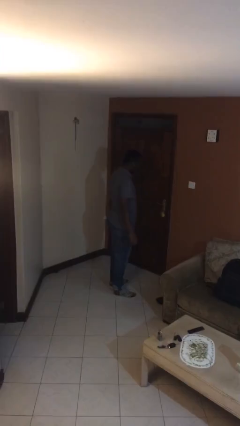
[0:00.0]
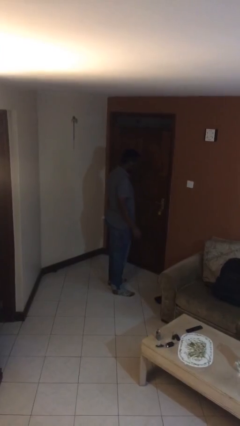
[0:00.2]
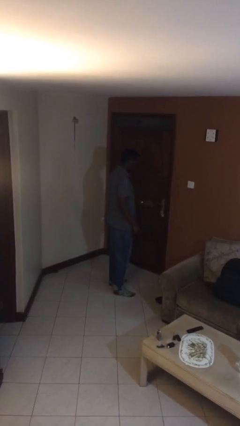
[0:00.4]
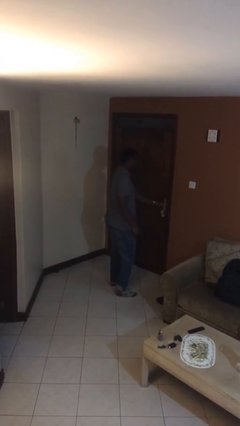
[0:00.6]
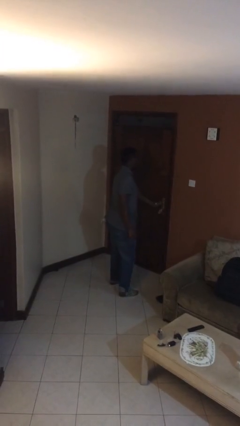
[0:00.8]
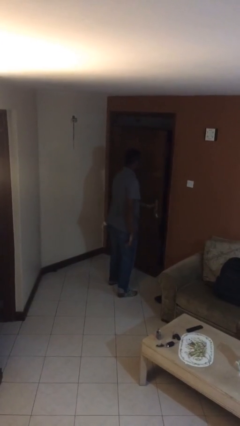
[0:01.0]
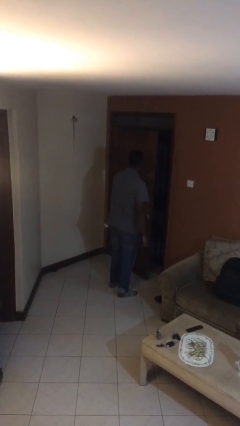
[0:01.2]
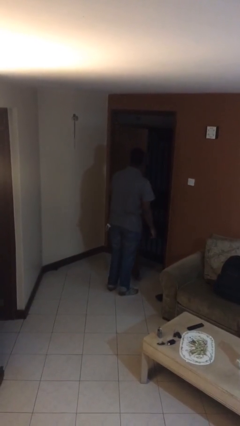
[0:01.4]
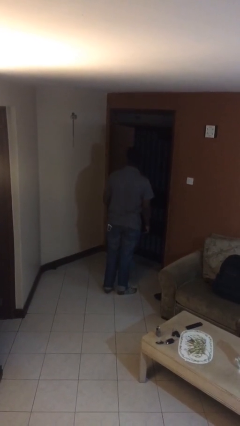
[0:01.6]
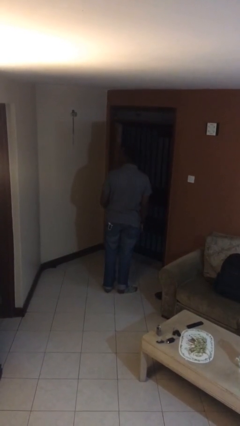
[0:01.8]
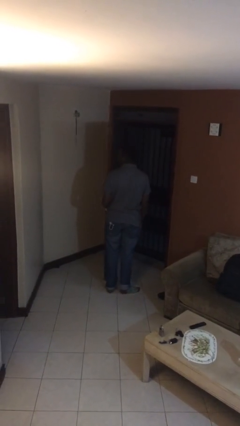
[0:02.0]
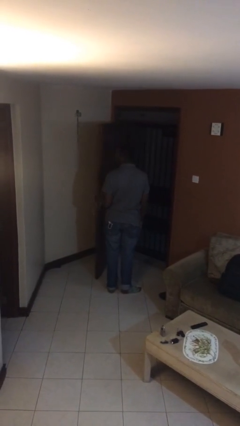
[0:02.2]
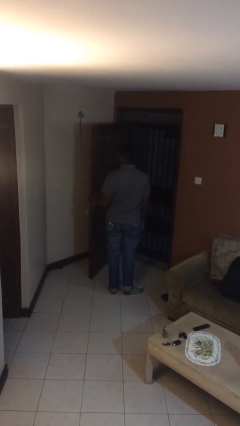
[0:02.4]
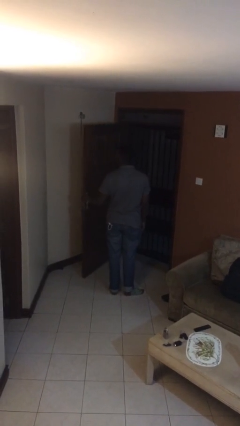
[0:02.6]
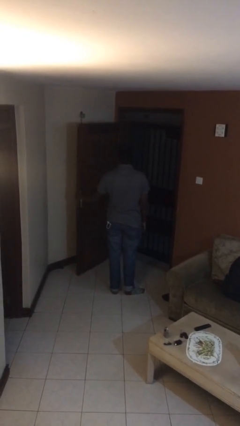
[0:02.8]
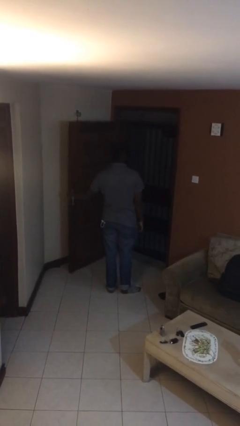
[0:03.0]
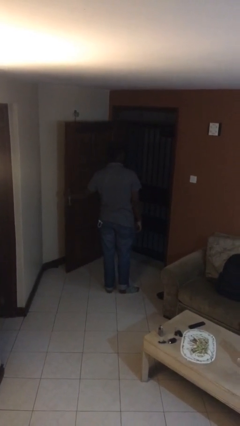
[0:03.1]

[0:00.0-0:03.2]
person opens facility door

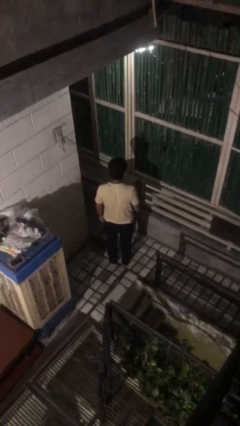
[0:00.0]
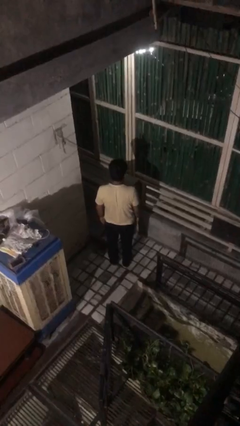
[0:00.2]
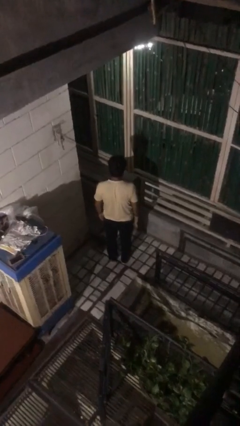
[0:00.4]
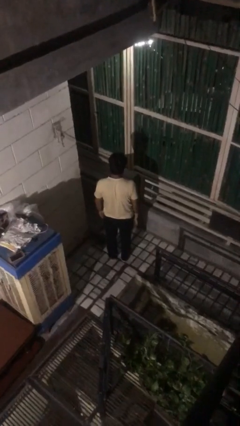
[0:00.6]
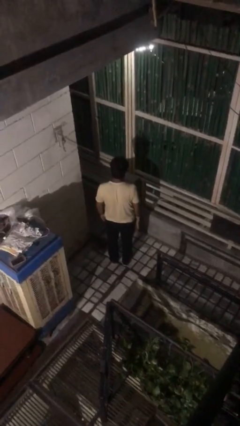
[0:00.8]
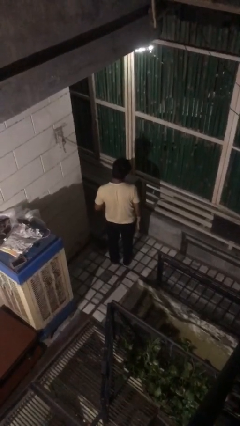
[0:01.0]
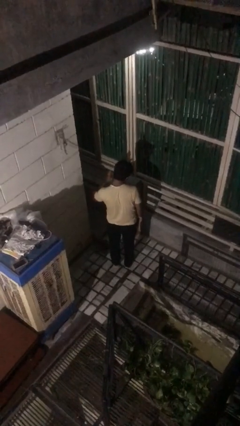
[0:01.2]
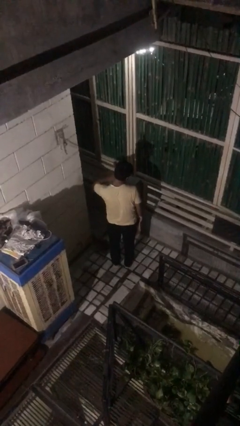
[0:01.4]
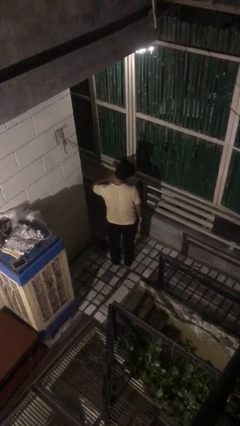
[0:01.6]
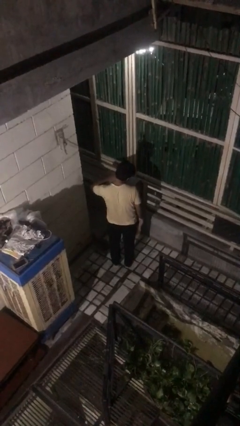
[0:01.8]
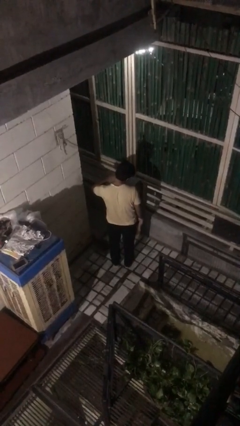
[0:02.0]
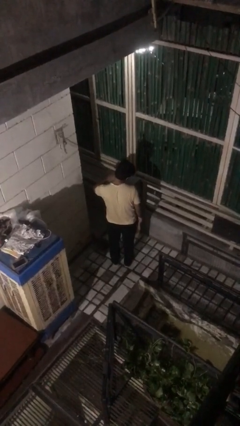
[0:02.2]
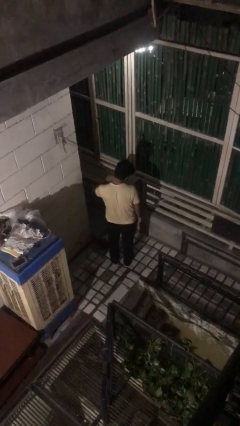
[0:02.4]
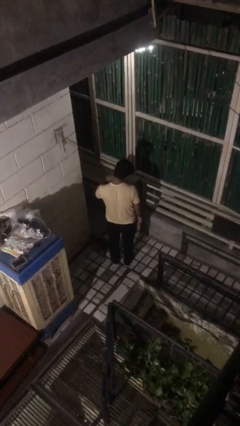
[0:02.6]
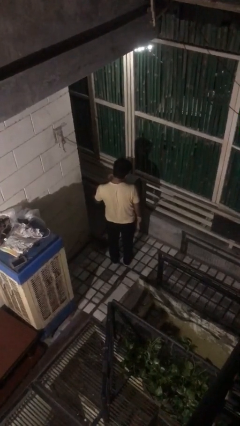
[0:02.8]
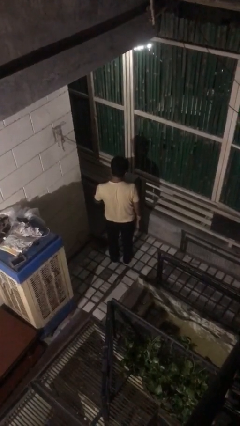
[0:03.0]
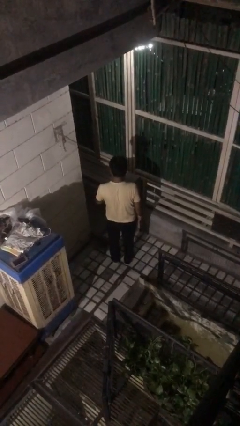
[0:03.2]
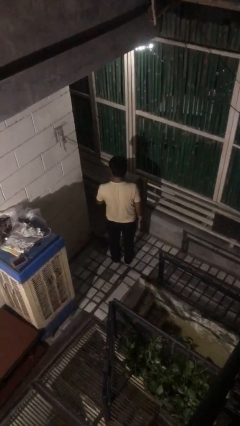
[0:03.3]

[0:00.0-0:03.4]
person swats bug

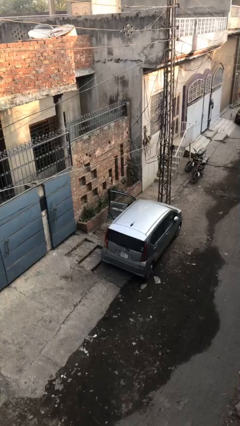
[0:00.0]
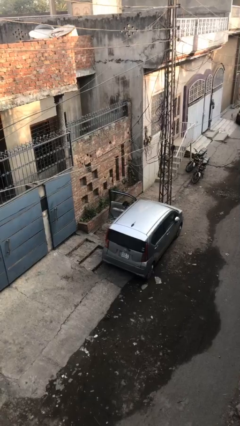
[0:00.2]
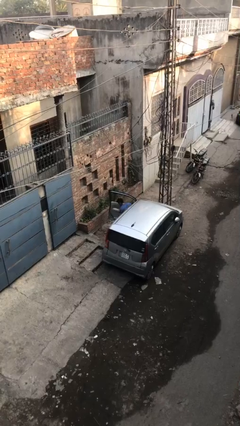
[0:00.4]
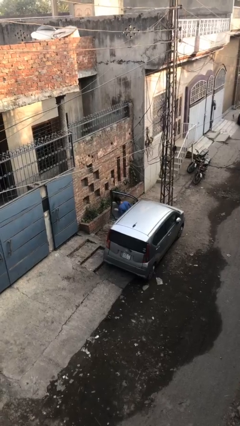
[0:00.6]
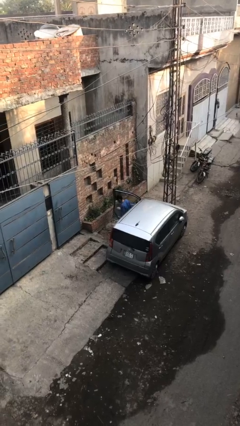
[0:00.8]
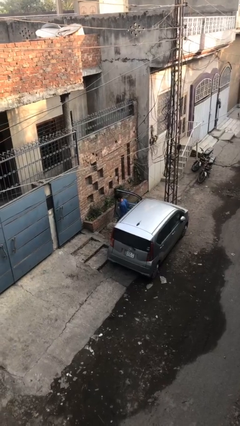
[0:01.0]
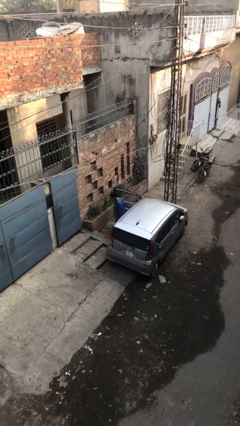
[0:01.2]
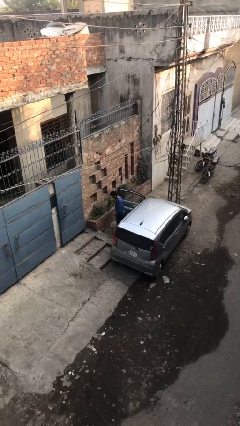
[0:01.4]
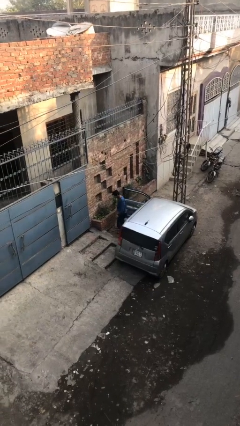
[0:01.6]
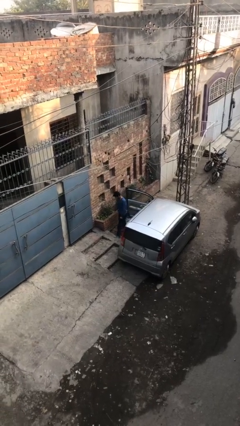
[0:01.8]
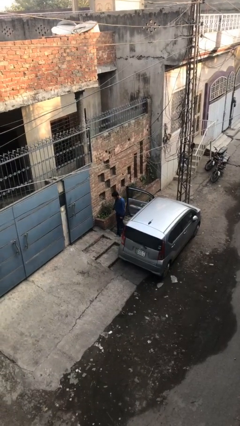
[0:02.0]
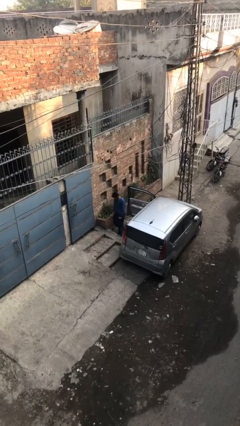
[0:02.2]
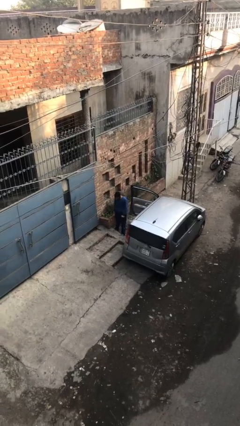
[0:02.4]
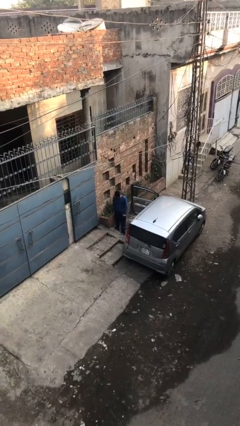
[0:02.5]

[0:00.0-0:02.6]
person exits car

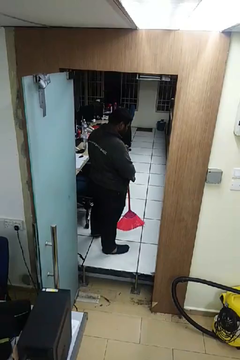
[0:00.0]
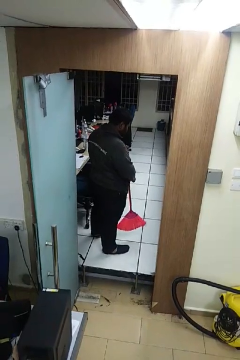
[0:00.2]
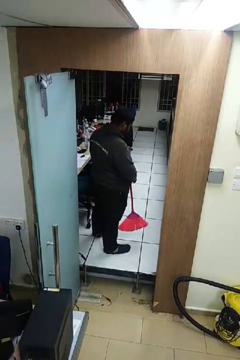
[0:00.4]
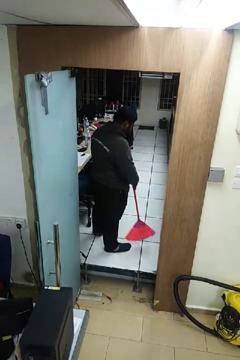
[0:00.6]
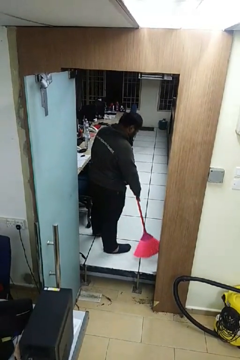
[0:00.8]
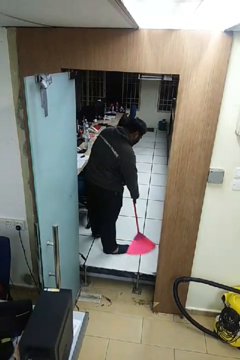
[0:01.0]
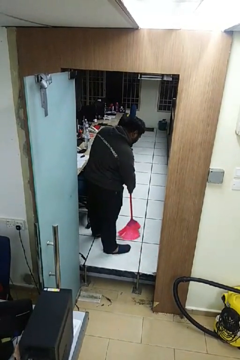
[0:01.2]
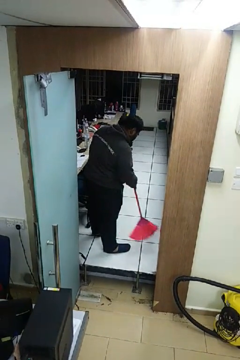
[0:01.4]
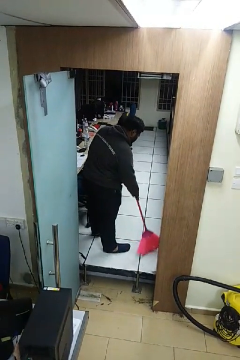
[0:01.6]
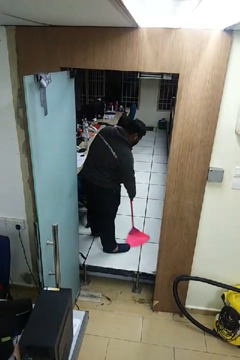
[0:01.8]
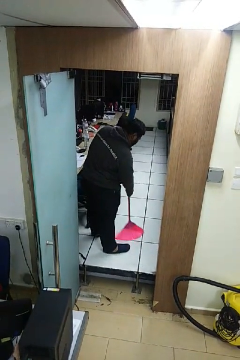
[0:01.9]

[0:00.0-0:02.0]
person sweeps floor

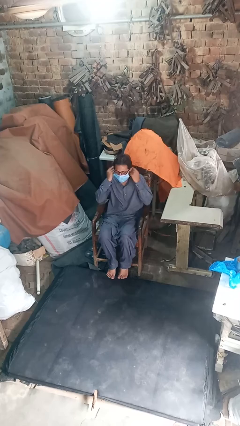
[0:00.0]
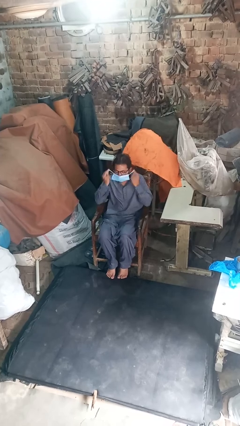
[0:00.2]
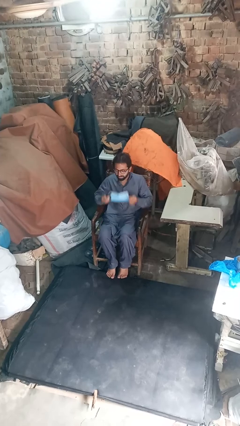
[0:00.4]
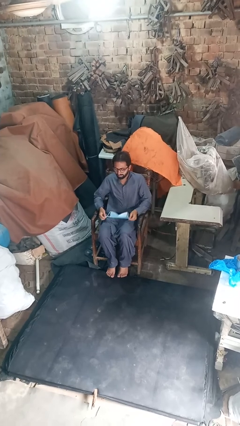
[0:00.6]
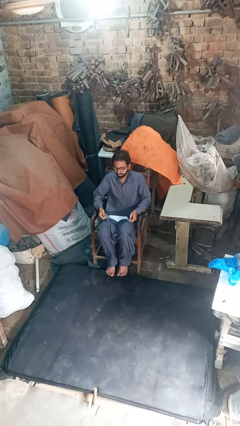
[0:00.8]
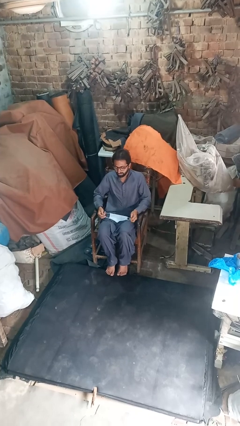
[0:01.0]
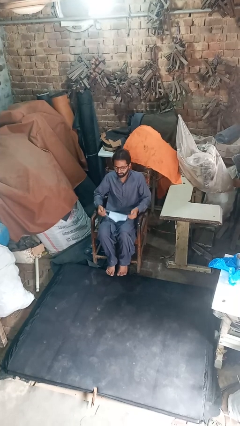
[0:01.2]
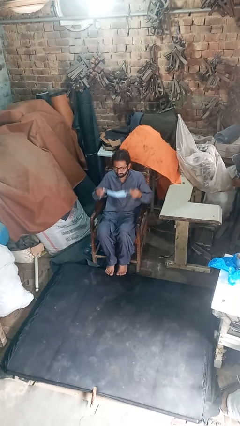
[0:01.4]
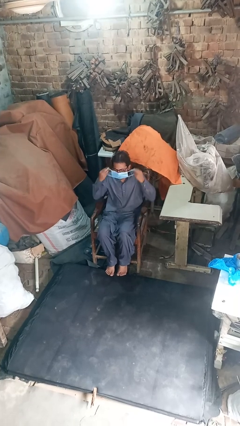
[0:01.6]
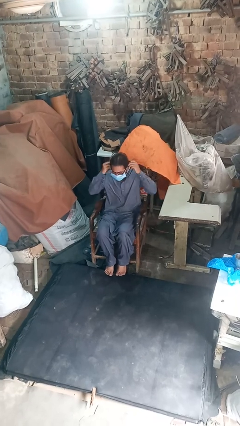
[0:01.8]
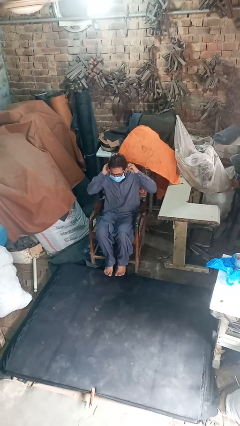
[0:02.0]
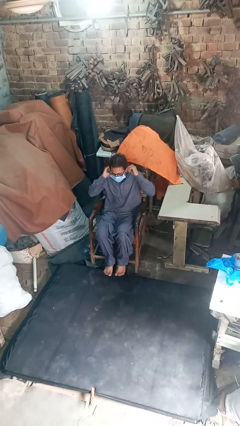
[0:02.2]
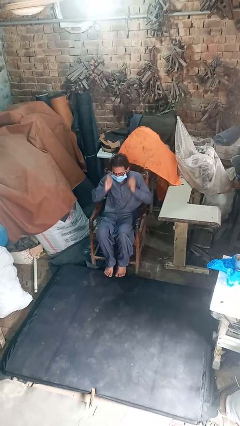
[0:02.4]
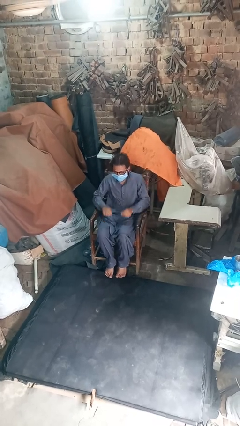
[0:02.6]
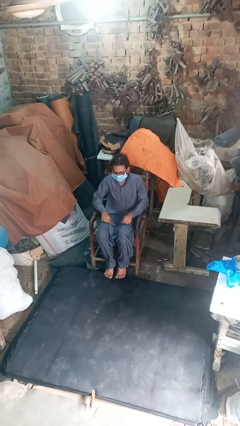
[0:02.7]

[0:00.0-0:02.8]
person puts on facemask

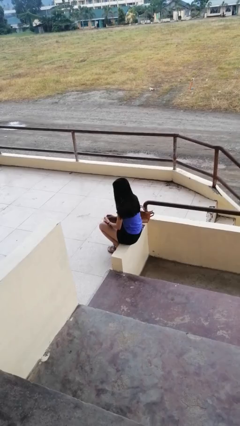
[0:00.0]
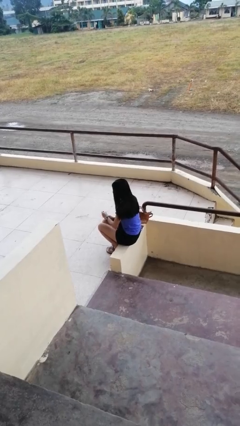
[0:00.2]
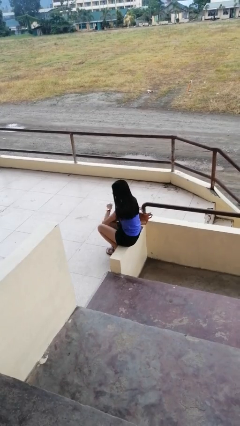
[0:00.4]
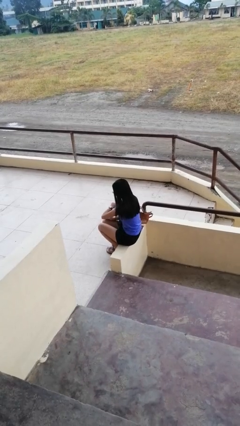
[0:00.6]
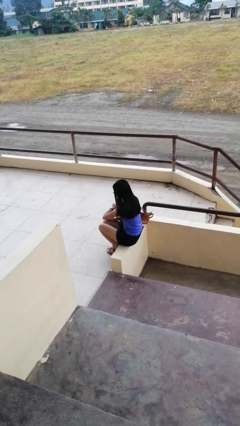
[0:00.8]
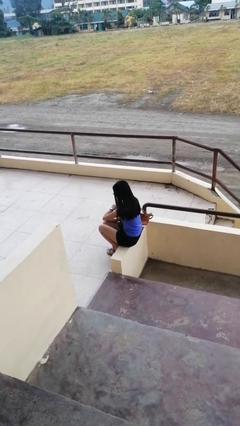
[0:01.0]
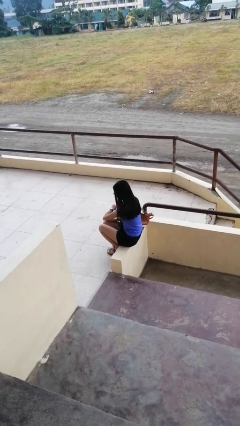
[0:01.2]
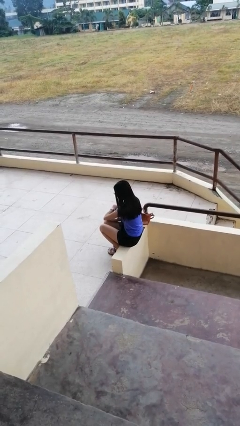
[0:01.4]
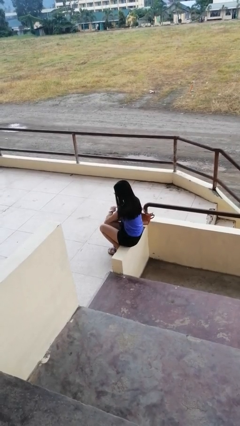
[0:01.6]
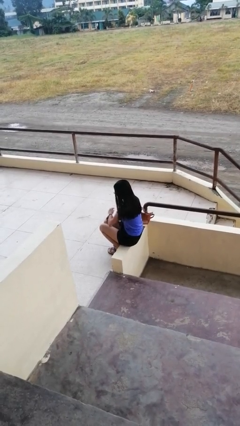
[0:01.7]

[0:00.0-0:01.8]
person looks at wristwatch

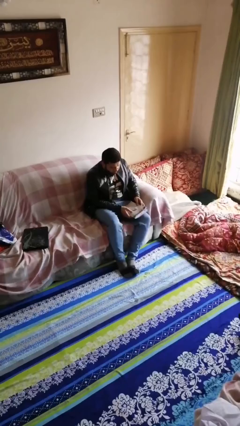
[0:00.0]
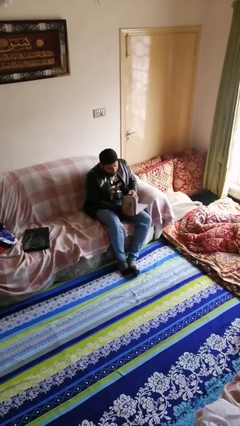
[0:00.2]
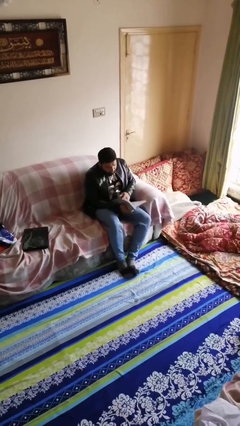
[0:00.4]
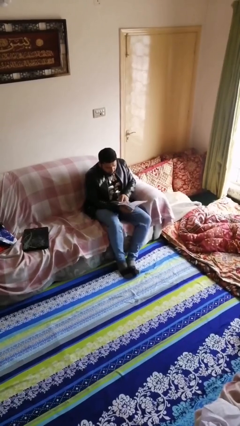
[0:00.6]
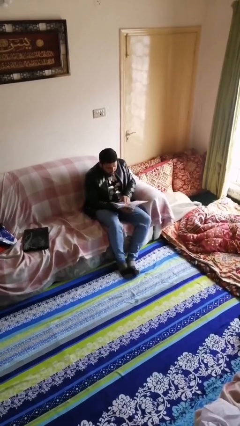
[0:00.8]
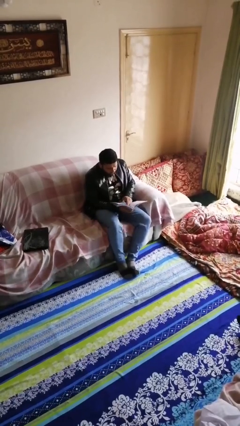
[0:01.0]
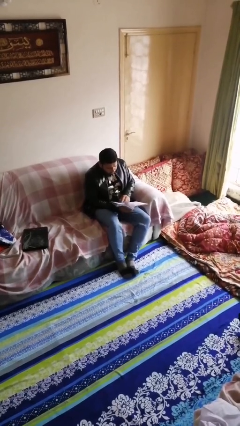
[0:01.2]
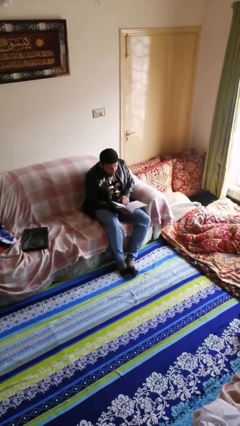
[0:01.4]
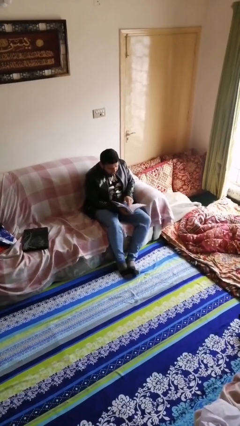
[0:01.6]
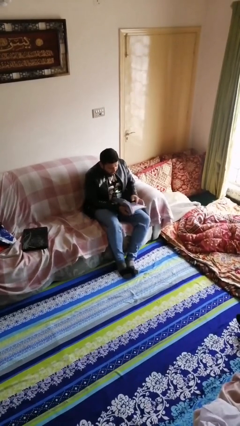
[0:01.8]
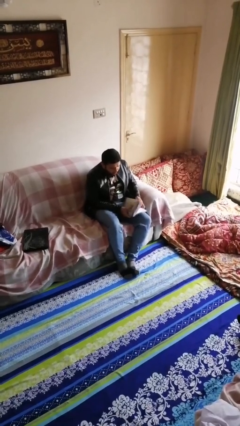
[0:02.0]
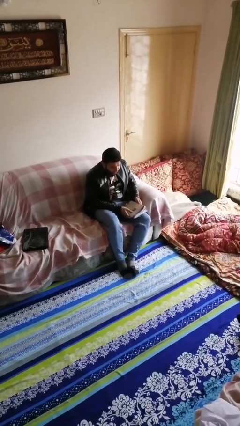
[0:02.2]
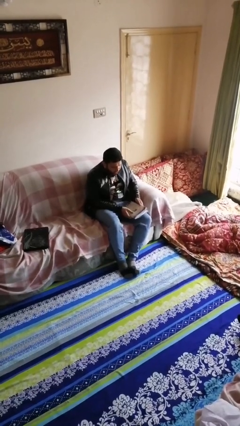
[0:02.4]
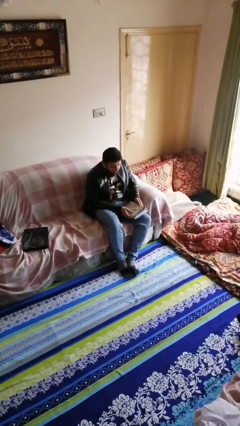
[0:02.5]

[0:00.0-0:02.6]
person reads document
